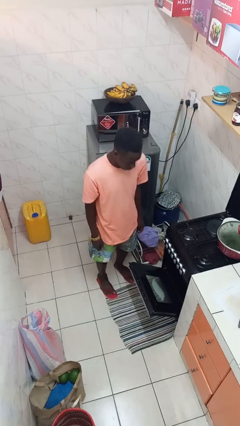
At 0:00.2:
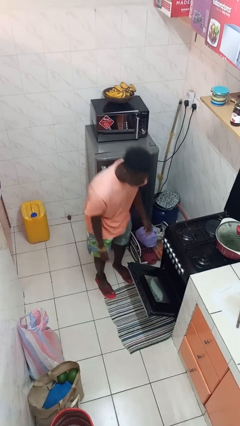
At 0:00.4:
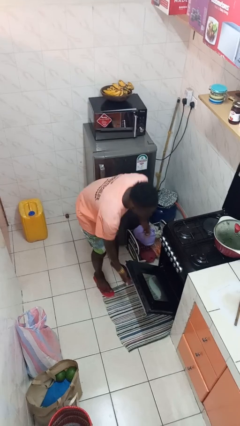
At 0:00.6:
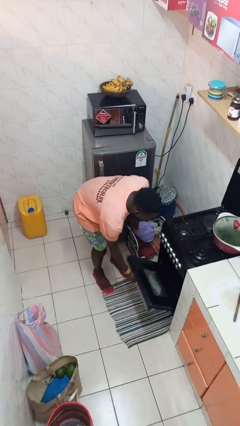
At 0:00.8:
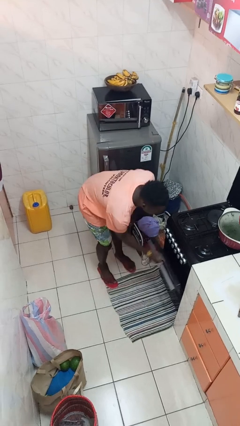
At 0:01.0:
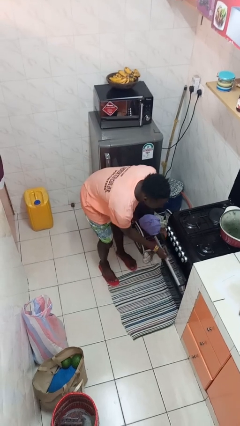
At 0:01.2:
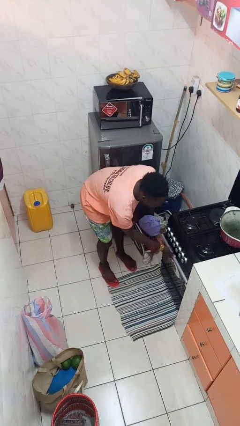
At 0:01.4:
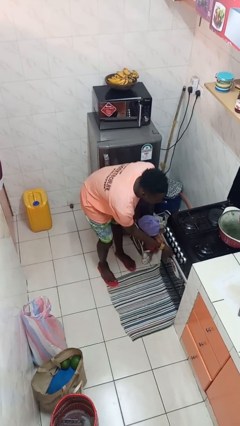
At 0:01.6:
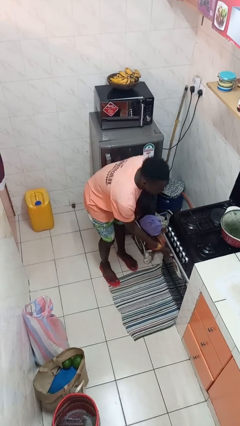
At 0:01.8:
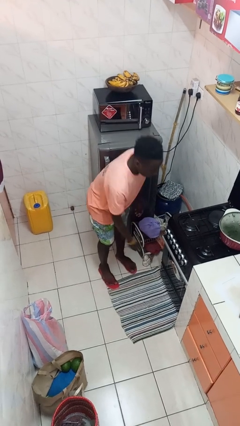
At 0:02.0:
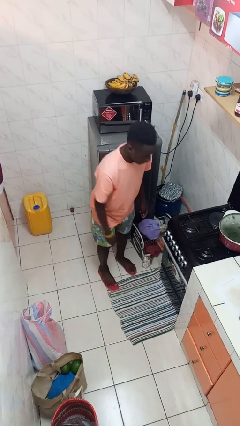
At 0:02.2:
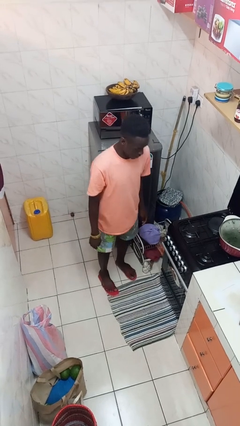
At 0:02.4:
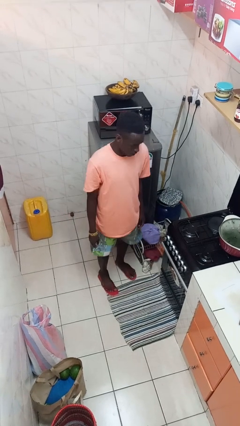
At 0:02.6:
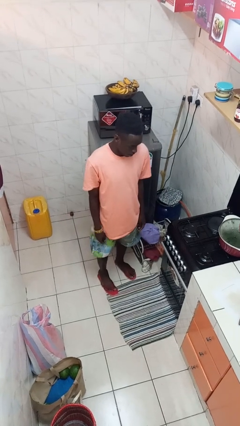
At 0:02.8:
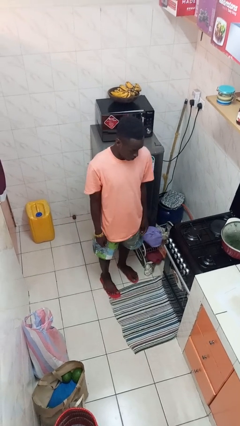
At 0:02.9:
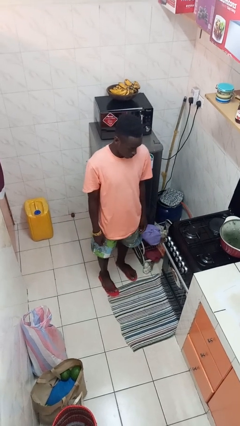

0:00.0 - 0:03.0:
person closes oven door

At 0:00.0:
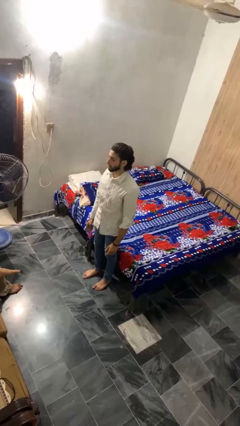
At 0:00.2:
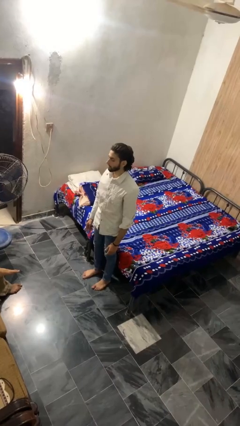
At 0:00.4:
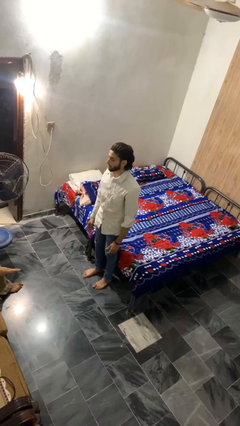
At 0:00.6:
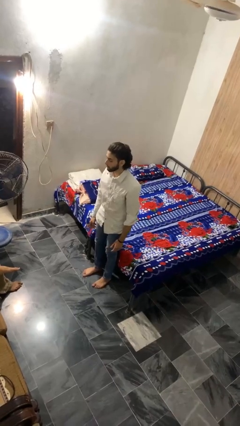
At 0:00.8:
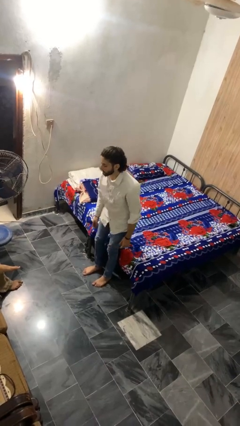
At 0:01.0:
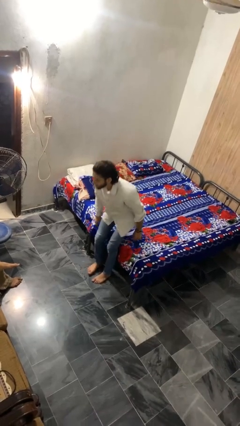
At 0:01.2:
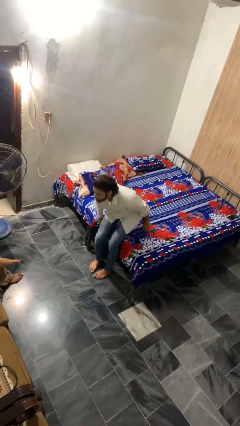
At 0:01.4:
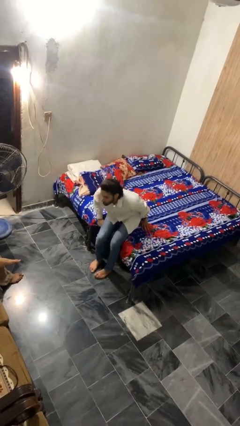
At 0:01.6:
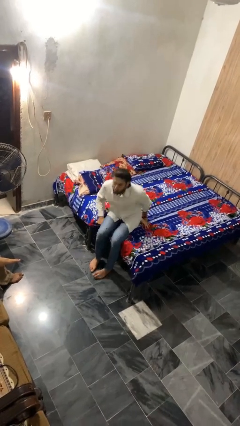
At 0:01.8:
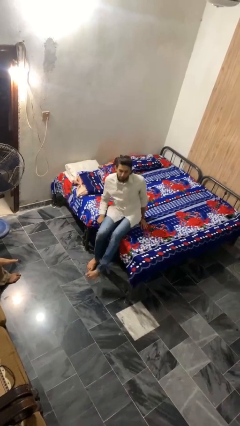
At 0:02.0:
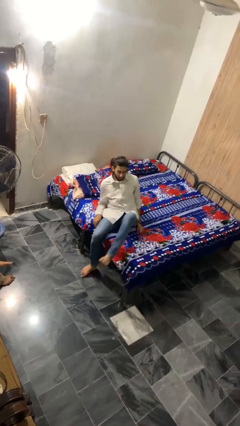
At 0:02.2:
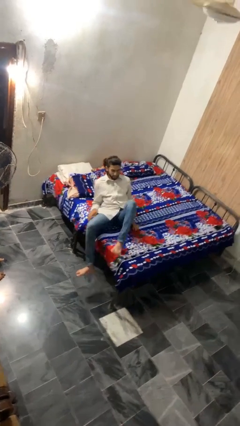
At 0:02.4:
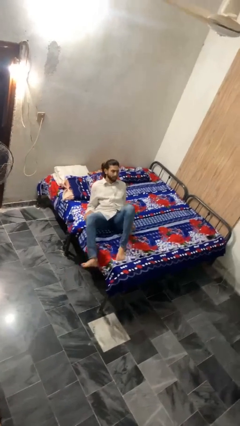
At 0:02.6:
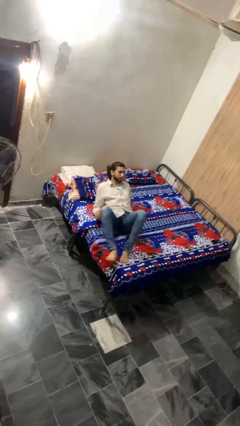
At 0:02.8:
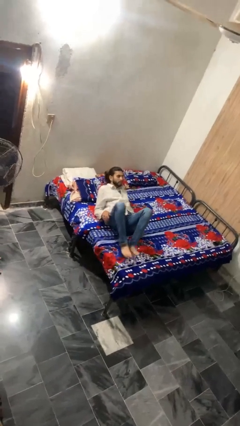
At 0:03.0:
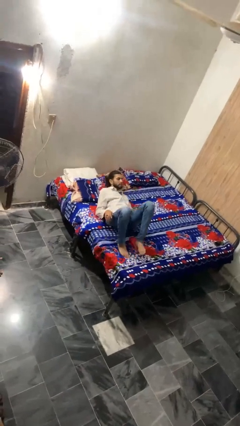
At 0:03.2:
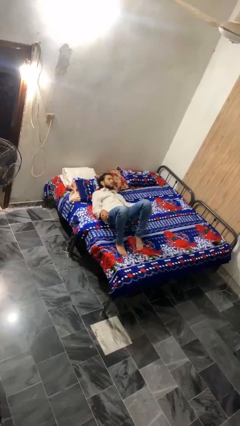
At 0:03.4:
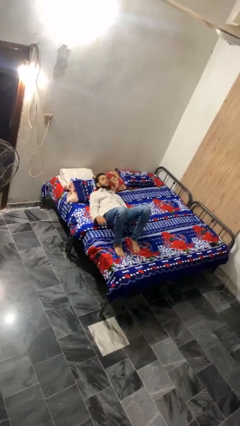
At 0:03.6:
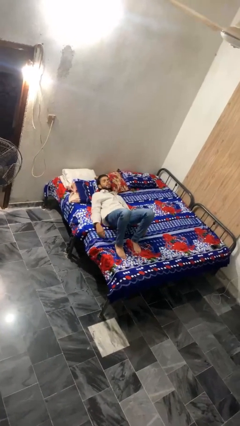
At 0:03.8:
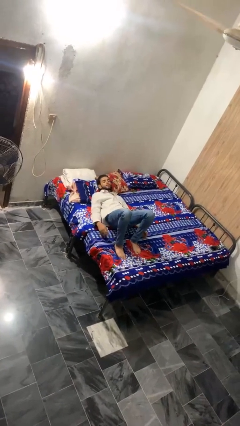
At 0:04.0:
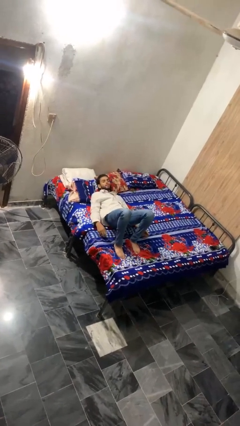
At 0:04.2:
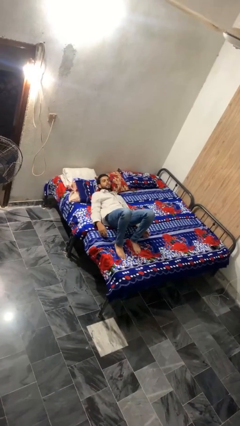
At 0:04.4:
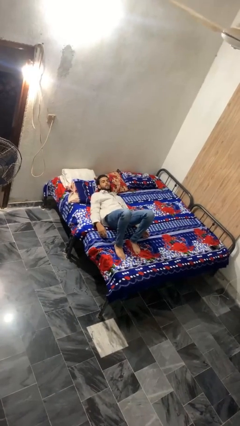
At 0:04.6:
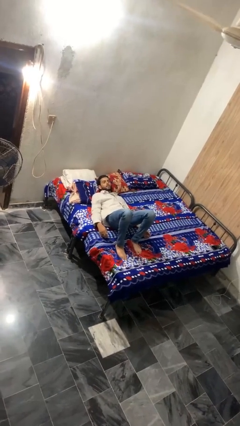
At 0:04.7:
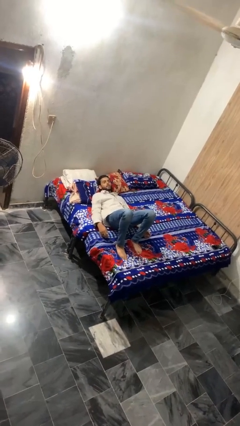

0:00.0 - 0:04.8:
person lies down on bed

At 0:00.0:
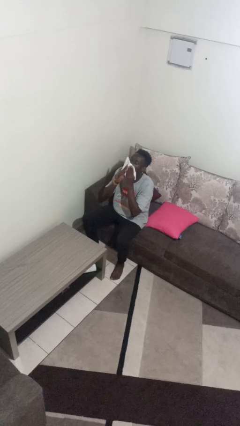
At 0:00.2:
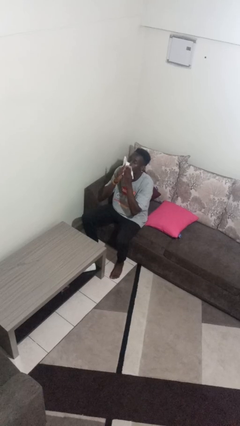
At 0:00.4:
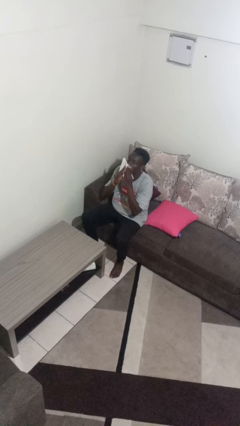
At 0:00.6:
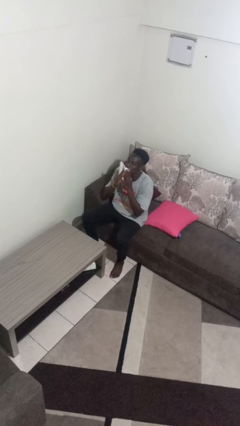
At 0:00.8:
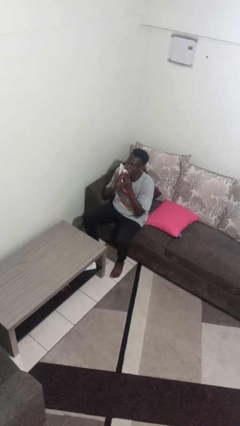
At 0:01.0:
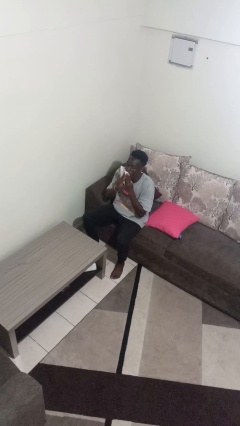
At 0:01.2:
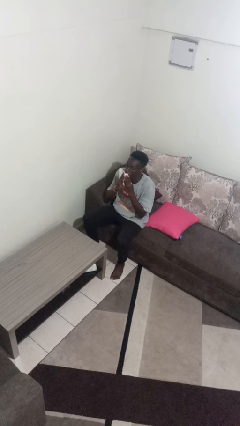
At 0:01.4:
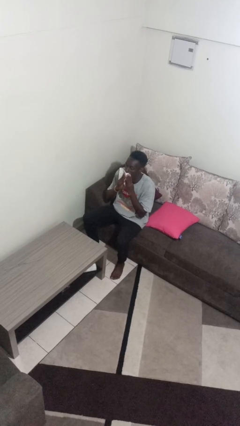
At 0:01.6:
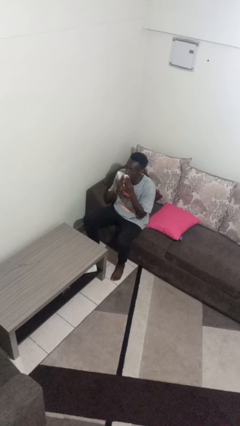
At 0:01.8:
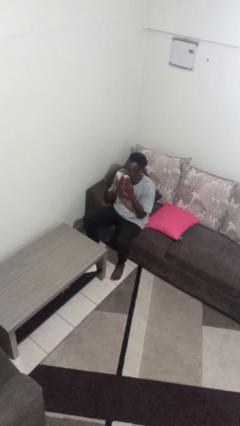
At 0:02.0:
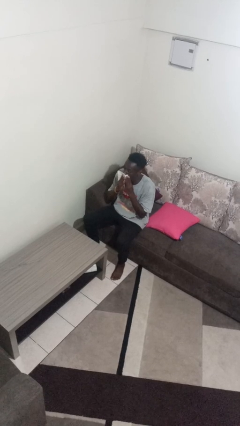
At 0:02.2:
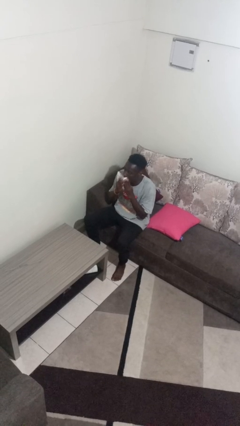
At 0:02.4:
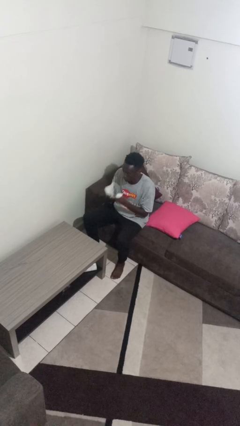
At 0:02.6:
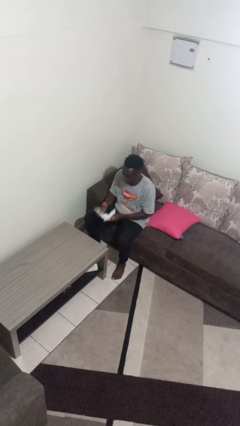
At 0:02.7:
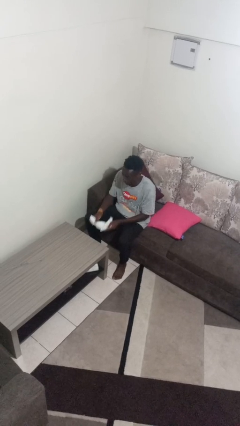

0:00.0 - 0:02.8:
person wipes mouth with napkin

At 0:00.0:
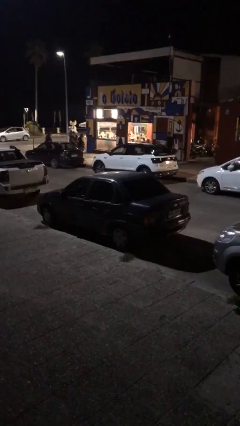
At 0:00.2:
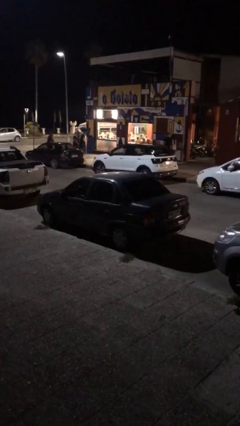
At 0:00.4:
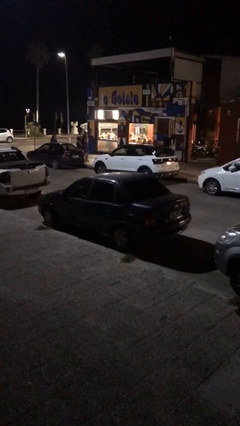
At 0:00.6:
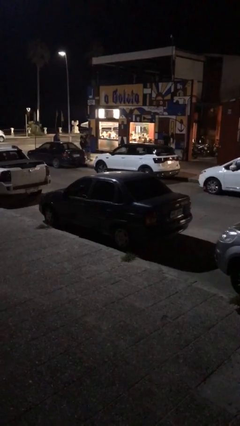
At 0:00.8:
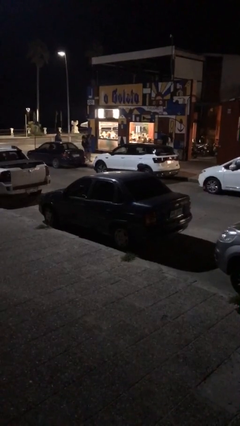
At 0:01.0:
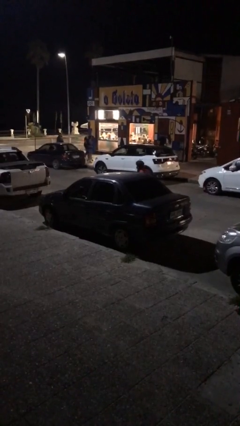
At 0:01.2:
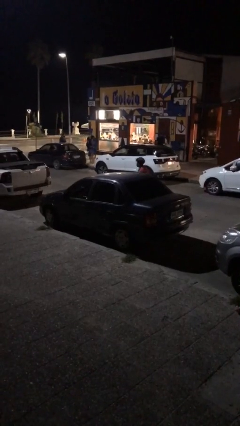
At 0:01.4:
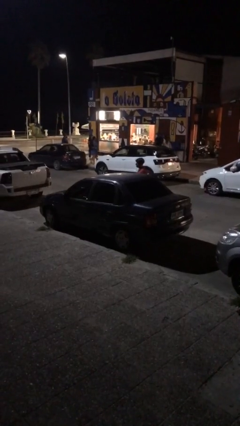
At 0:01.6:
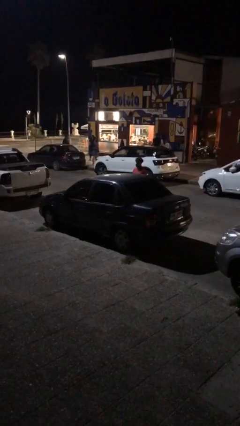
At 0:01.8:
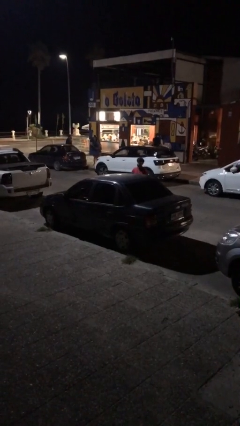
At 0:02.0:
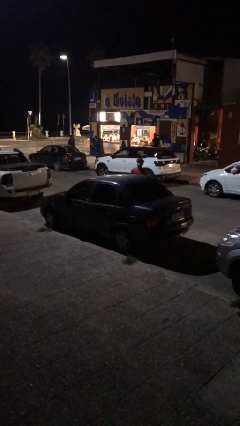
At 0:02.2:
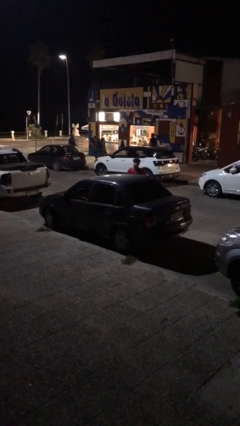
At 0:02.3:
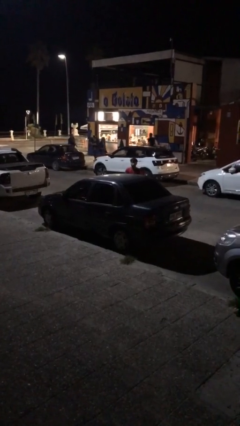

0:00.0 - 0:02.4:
car drops off person

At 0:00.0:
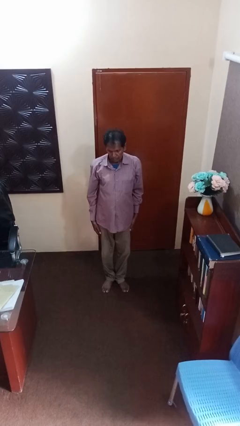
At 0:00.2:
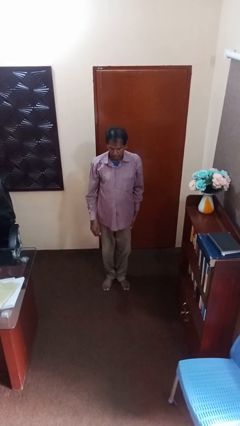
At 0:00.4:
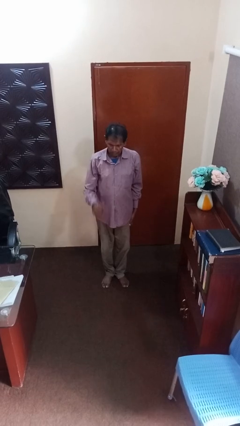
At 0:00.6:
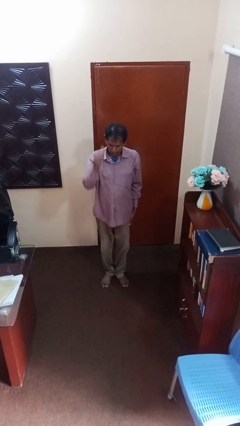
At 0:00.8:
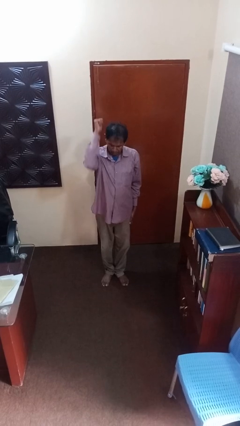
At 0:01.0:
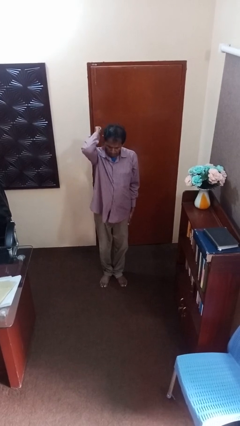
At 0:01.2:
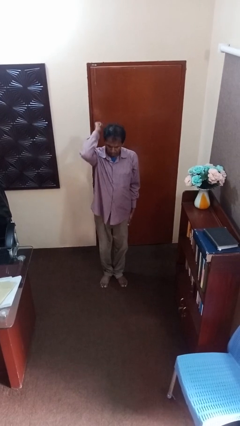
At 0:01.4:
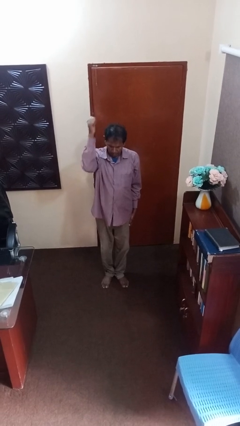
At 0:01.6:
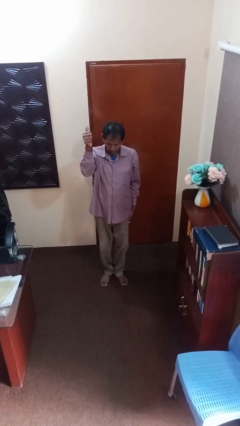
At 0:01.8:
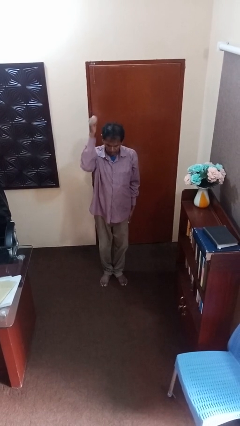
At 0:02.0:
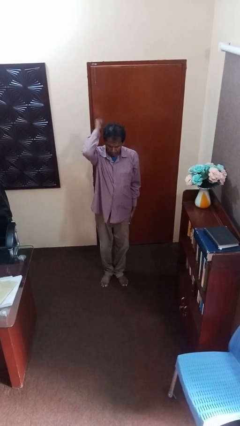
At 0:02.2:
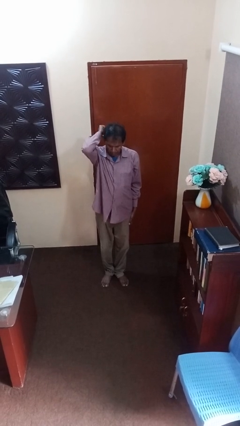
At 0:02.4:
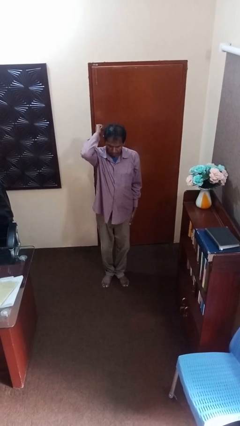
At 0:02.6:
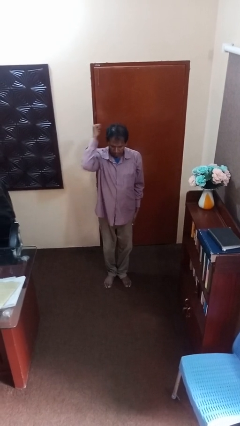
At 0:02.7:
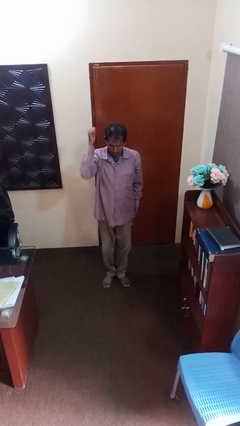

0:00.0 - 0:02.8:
person gestures behind me

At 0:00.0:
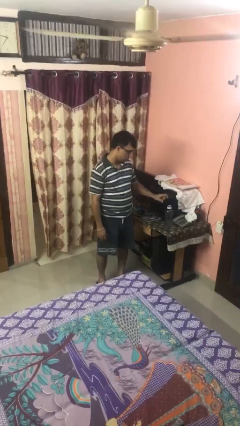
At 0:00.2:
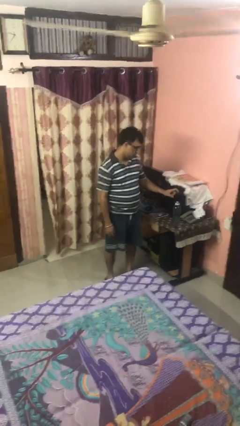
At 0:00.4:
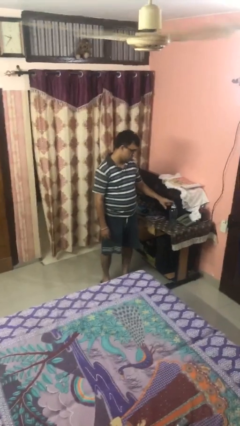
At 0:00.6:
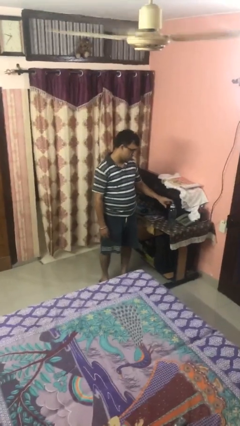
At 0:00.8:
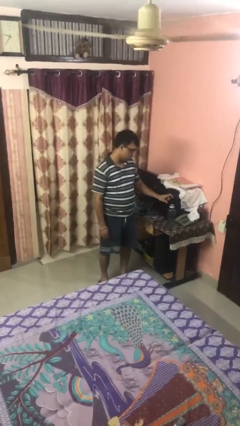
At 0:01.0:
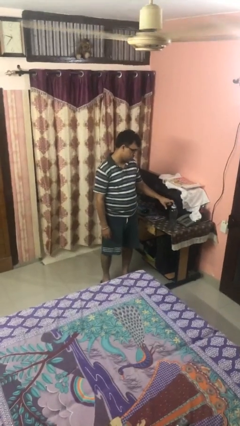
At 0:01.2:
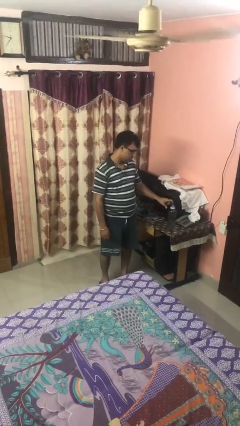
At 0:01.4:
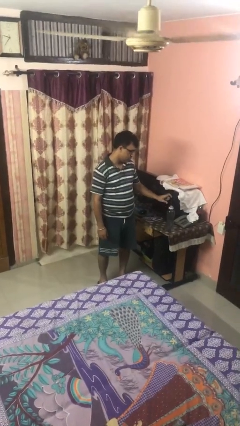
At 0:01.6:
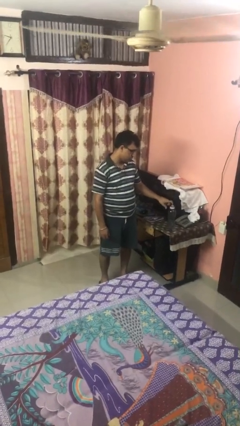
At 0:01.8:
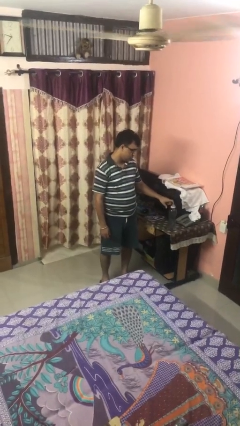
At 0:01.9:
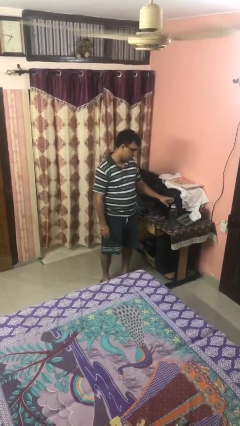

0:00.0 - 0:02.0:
person taps object with finger
